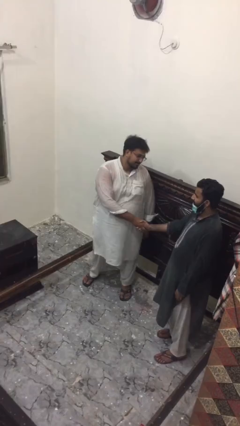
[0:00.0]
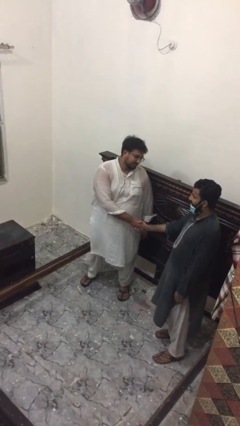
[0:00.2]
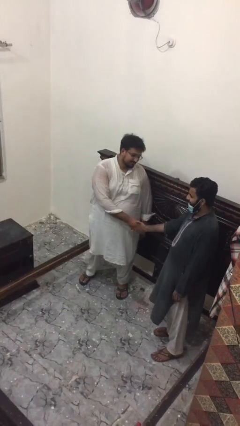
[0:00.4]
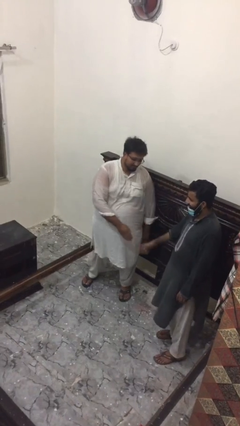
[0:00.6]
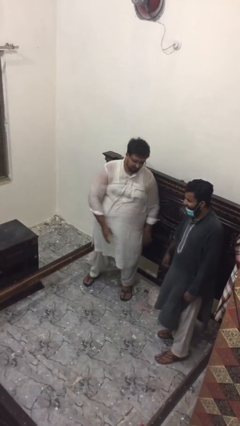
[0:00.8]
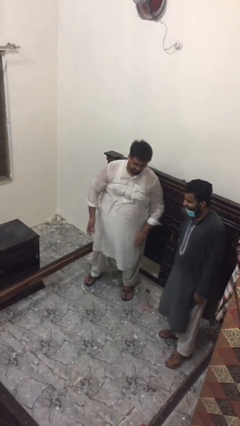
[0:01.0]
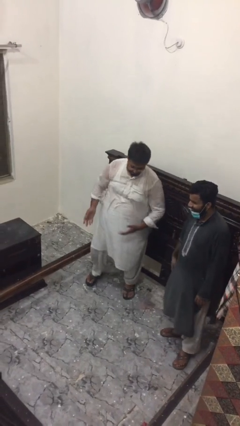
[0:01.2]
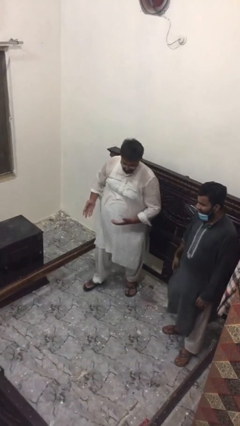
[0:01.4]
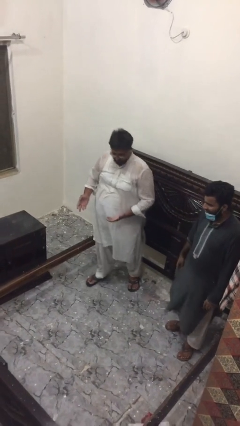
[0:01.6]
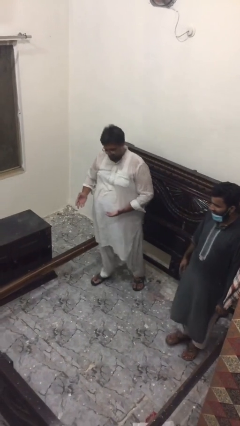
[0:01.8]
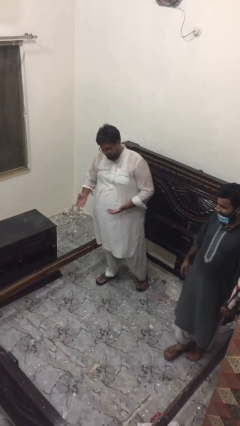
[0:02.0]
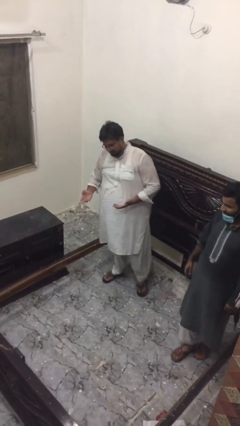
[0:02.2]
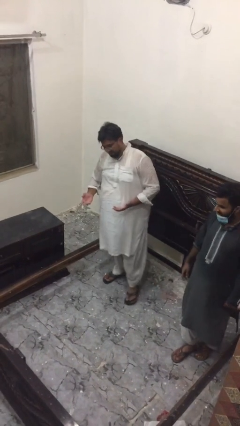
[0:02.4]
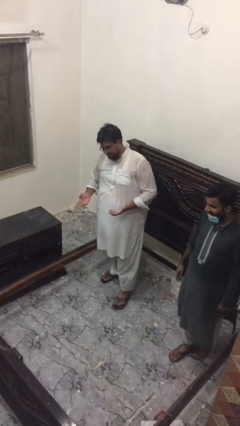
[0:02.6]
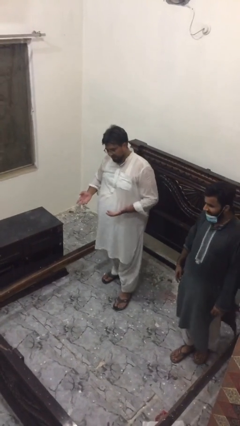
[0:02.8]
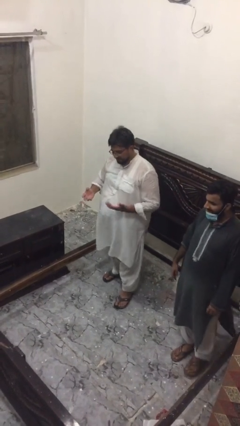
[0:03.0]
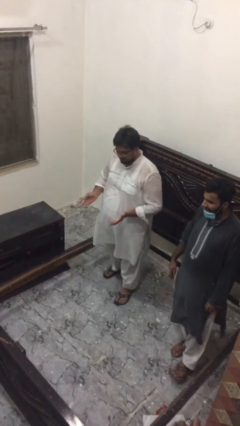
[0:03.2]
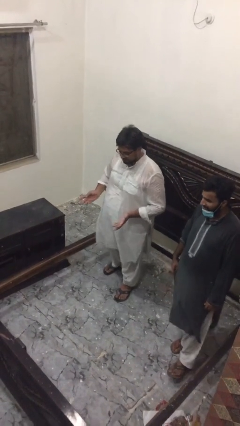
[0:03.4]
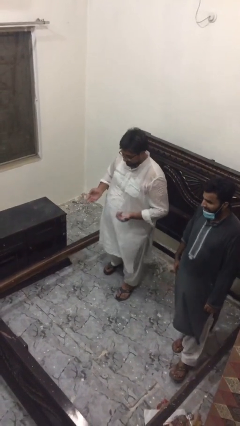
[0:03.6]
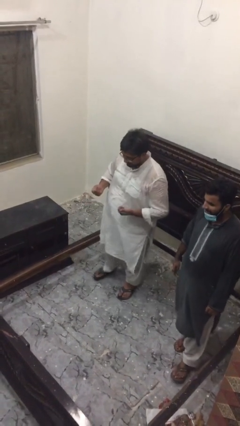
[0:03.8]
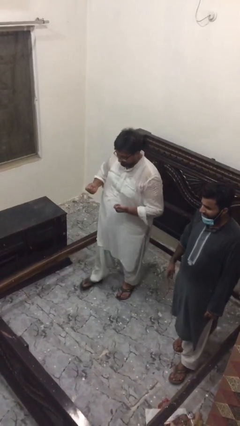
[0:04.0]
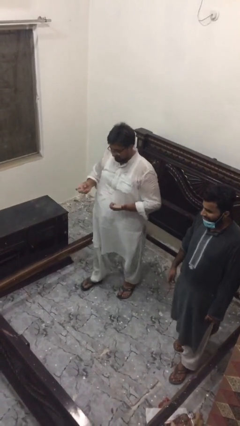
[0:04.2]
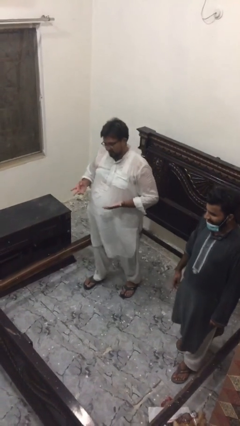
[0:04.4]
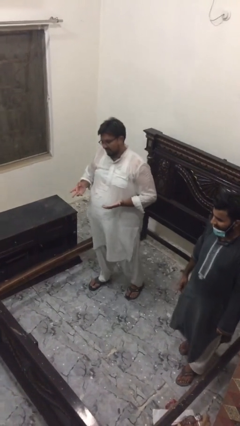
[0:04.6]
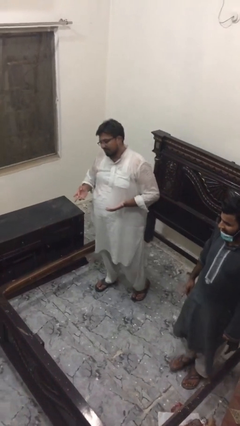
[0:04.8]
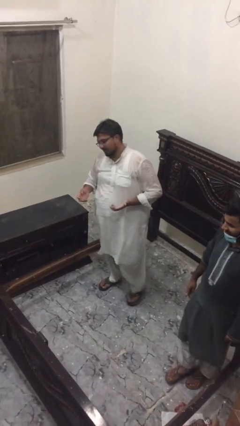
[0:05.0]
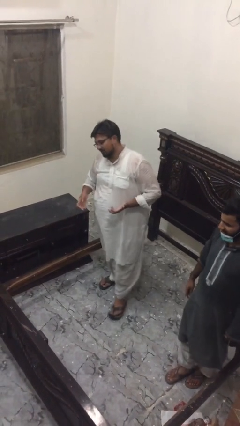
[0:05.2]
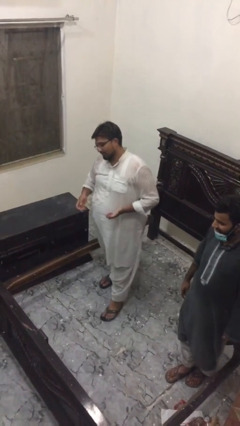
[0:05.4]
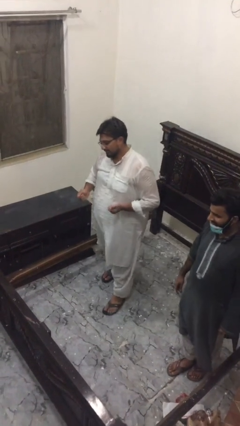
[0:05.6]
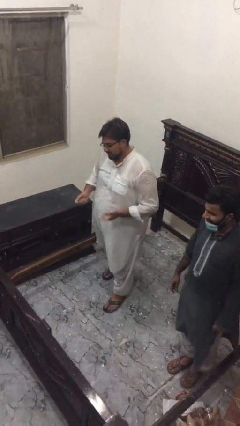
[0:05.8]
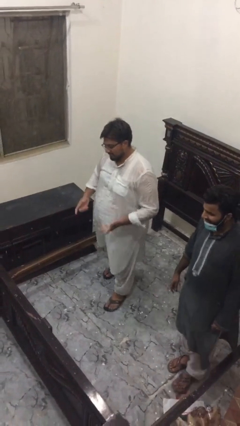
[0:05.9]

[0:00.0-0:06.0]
person talks to person

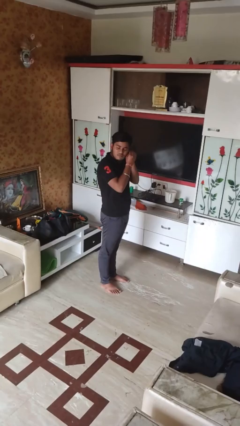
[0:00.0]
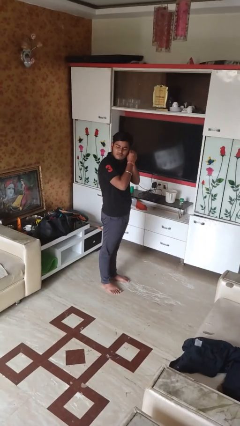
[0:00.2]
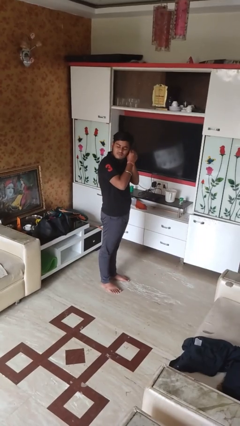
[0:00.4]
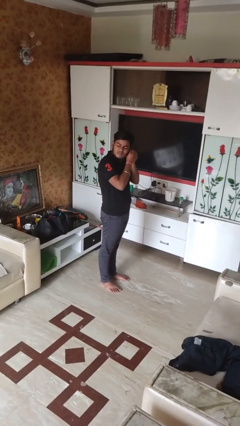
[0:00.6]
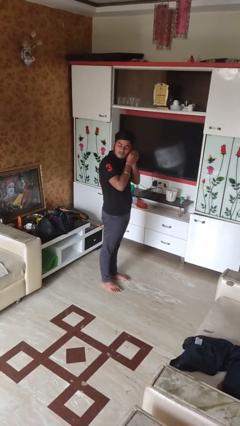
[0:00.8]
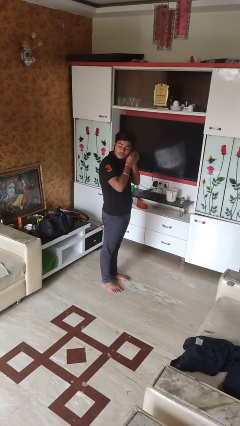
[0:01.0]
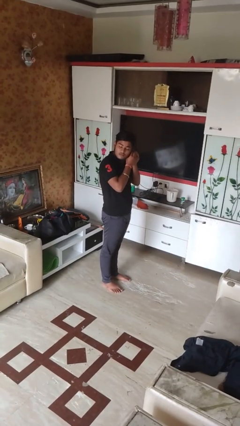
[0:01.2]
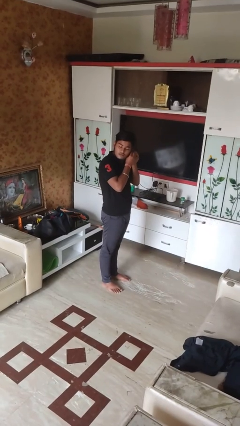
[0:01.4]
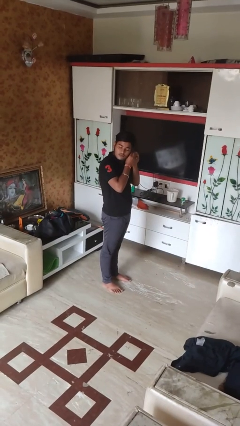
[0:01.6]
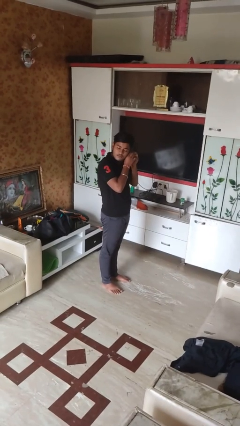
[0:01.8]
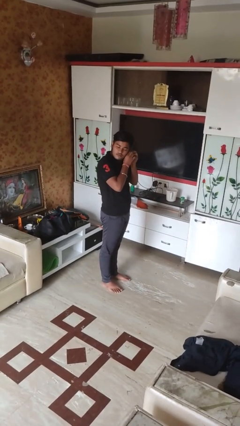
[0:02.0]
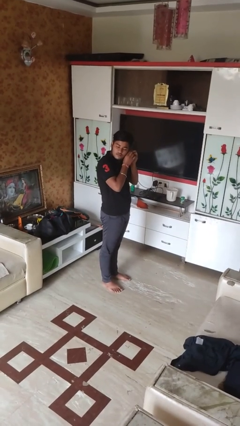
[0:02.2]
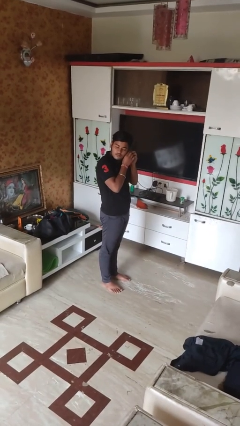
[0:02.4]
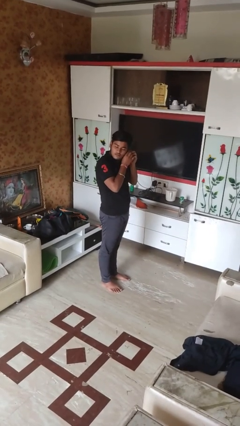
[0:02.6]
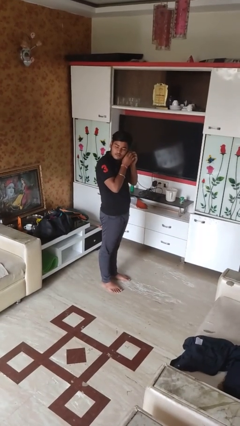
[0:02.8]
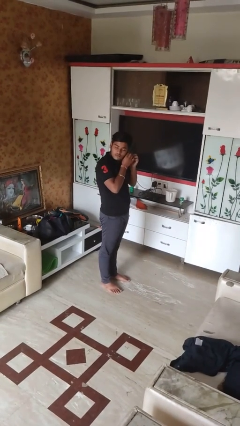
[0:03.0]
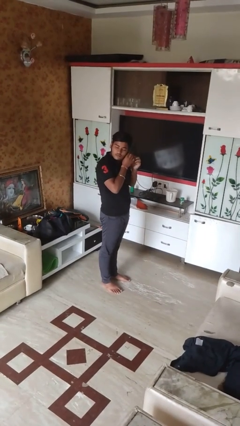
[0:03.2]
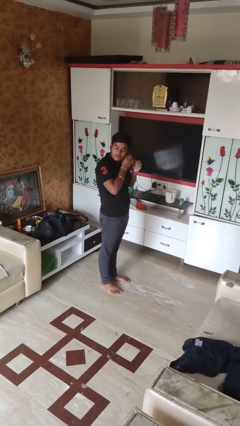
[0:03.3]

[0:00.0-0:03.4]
person puts on earrings

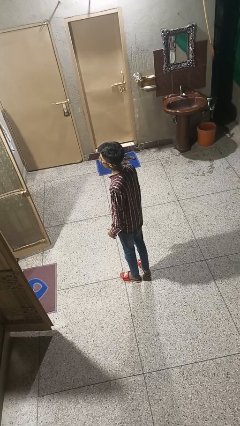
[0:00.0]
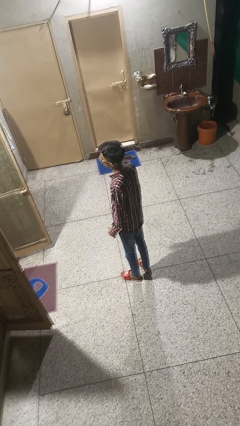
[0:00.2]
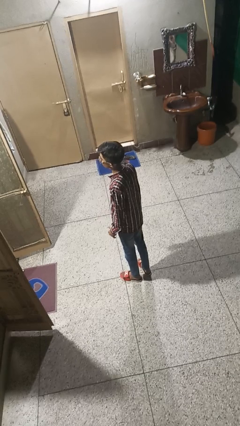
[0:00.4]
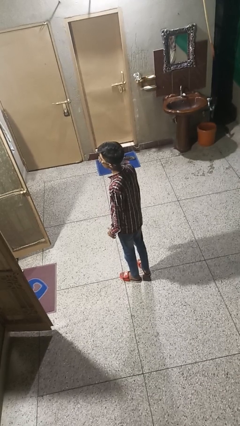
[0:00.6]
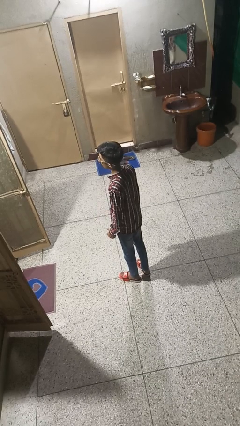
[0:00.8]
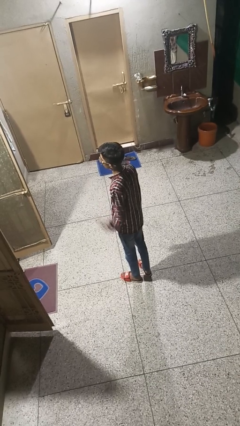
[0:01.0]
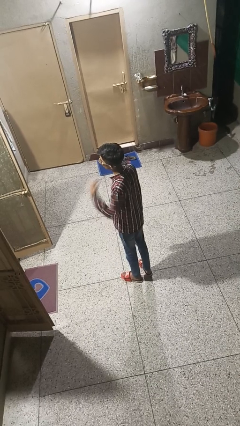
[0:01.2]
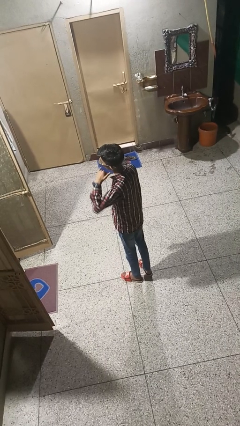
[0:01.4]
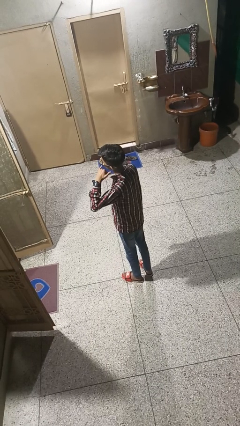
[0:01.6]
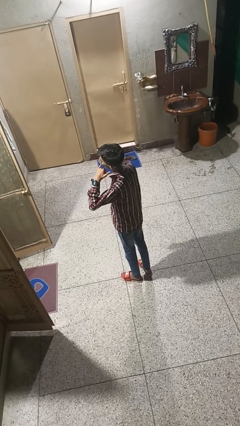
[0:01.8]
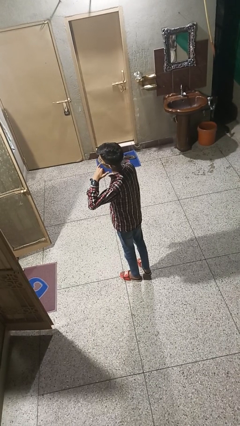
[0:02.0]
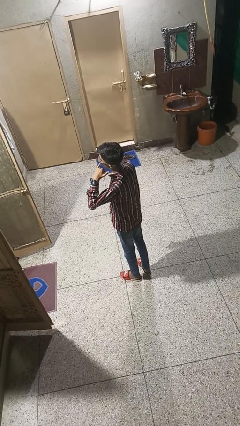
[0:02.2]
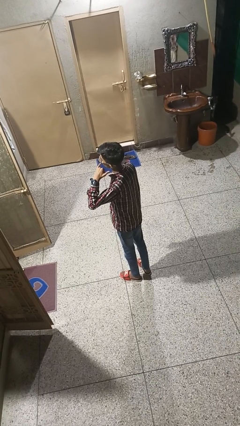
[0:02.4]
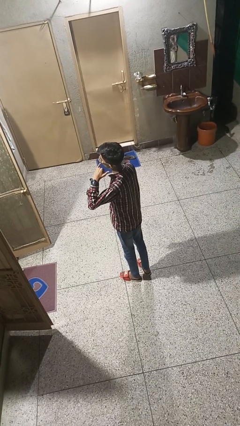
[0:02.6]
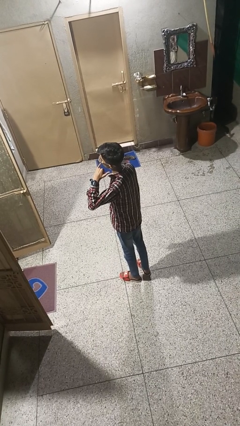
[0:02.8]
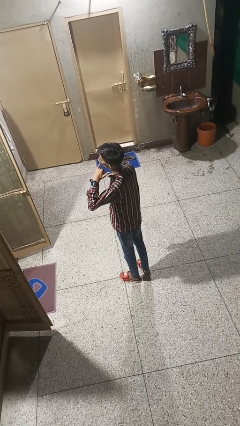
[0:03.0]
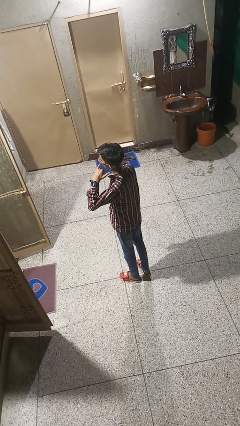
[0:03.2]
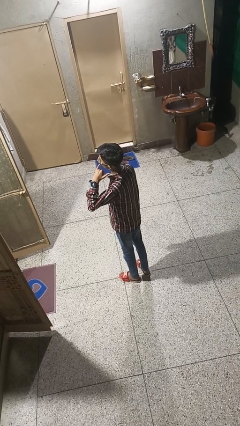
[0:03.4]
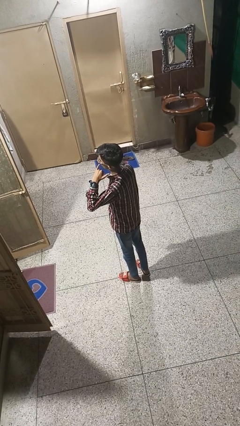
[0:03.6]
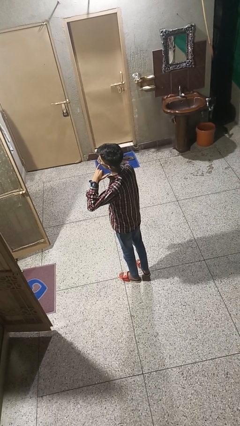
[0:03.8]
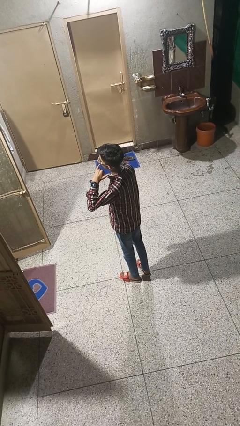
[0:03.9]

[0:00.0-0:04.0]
person gestures call me

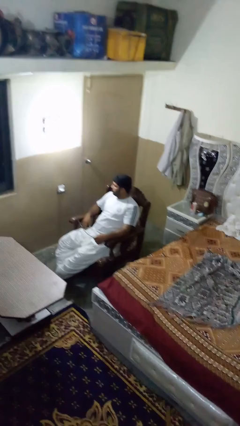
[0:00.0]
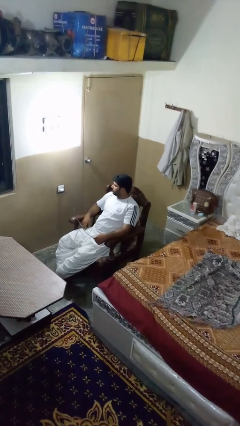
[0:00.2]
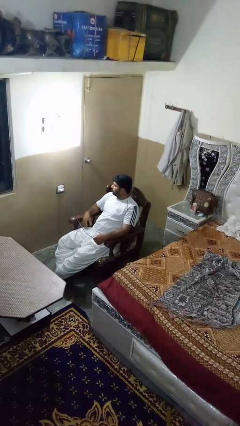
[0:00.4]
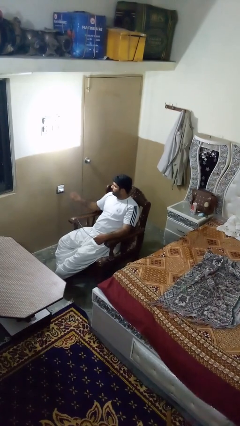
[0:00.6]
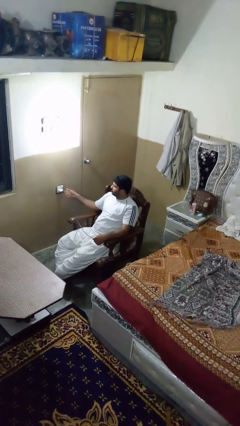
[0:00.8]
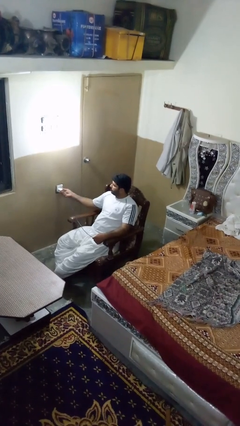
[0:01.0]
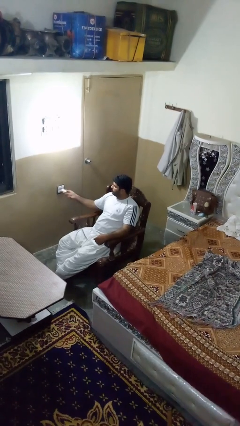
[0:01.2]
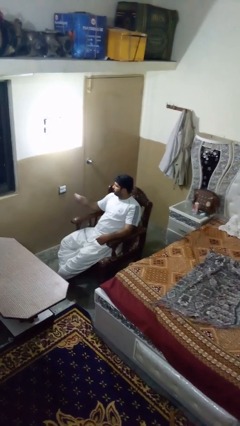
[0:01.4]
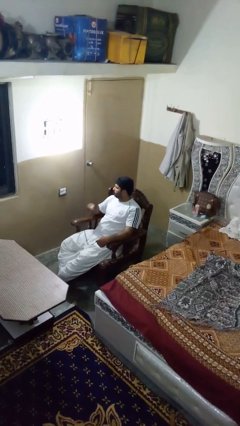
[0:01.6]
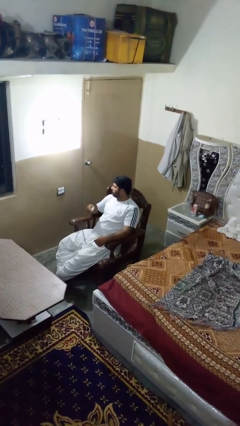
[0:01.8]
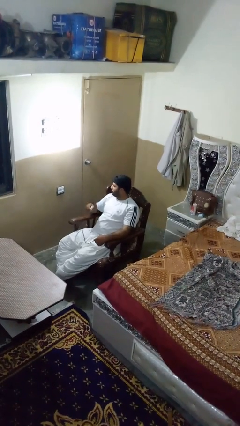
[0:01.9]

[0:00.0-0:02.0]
person unplugs from electrical socket

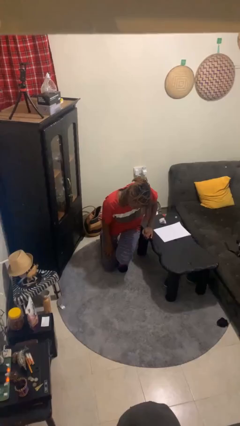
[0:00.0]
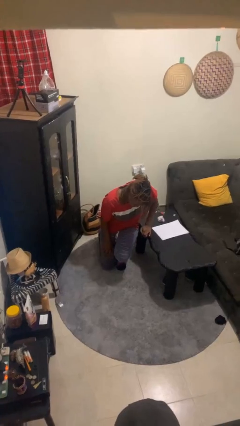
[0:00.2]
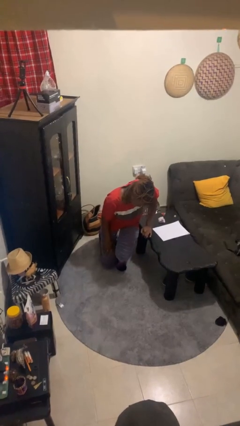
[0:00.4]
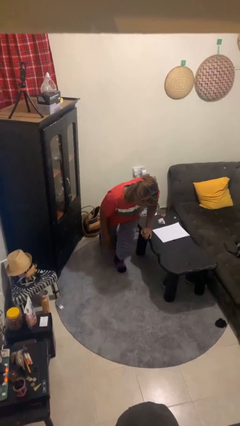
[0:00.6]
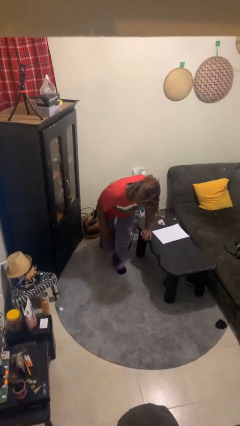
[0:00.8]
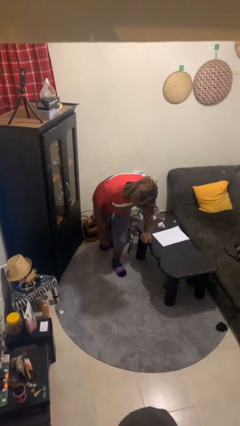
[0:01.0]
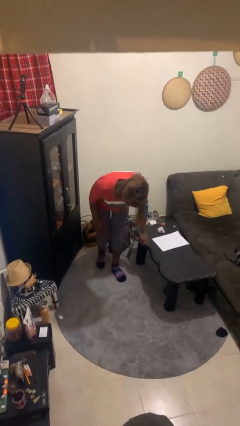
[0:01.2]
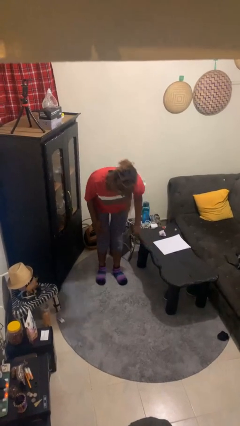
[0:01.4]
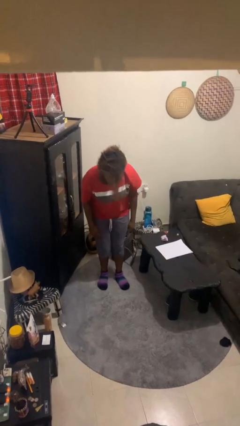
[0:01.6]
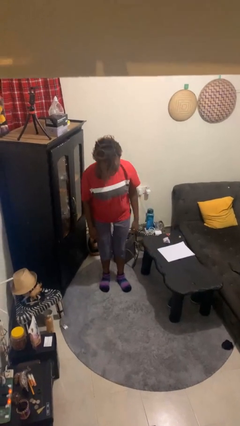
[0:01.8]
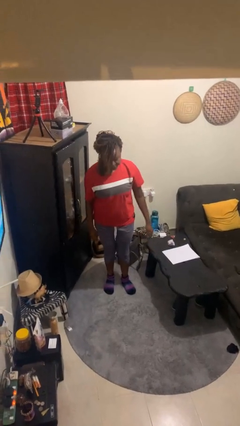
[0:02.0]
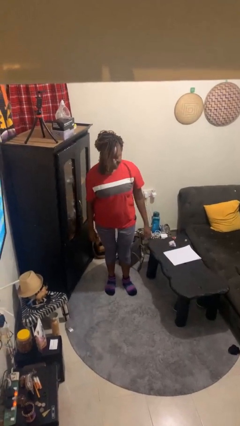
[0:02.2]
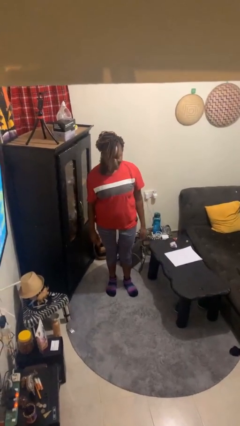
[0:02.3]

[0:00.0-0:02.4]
person stands up from floor
